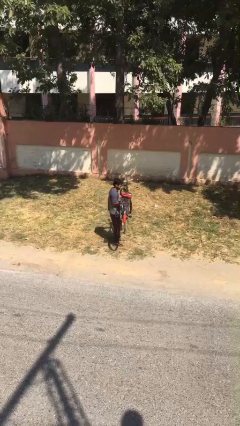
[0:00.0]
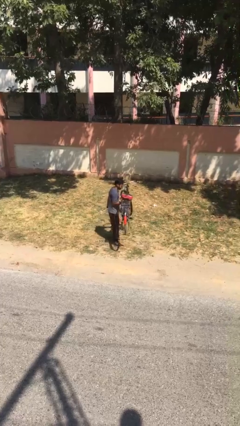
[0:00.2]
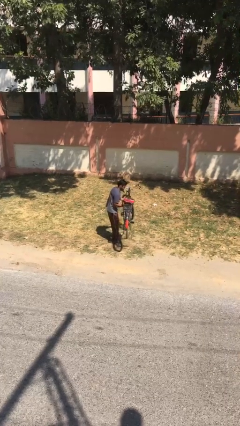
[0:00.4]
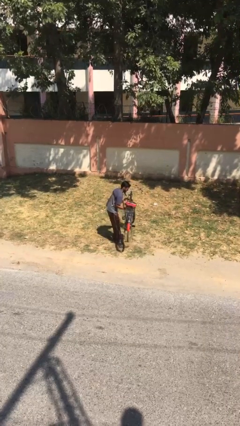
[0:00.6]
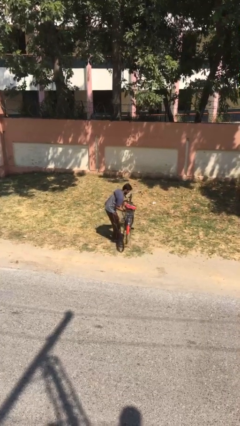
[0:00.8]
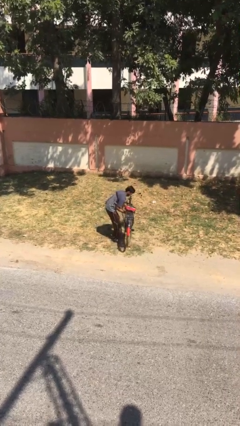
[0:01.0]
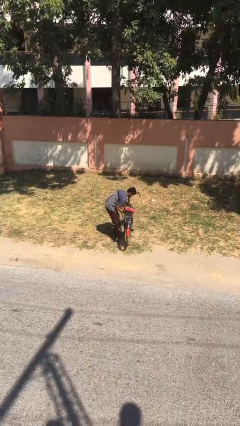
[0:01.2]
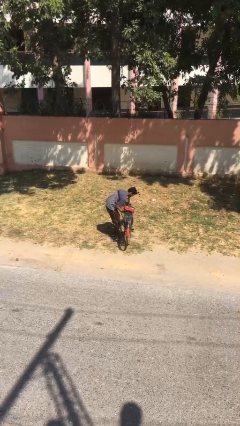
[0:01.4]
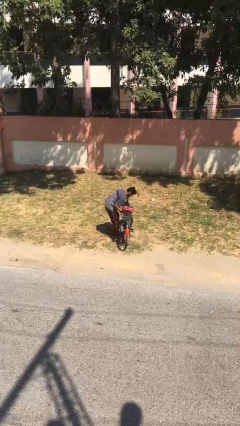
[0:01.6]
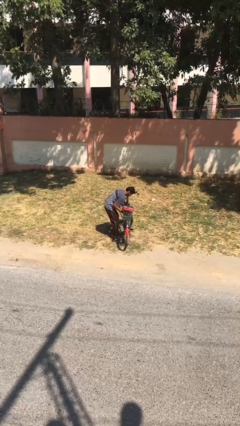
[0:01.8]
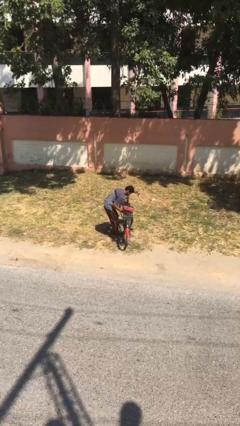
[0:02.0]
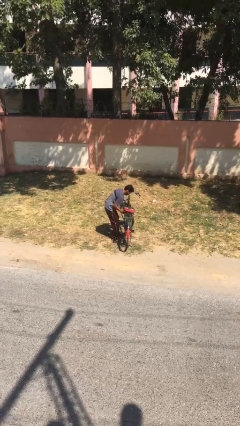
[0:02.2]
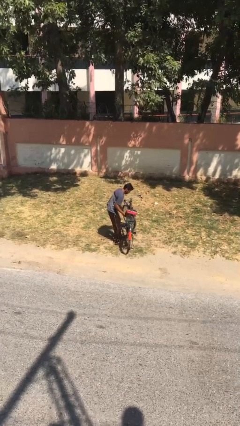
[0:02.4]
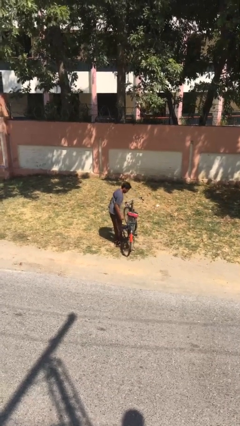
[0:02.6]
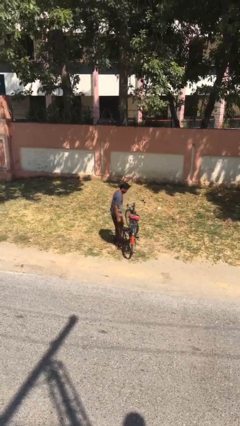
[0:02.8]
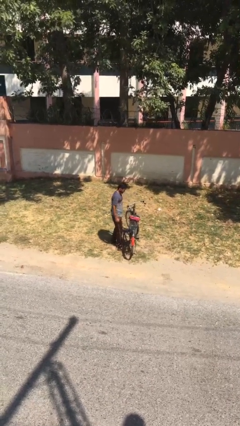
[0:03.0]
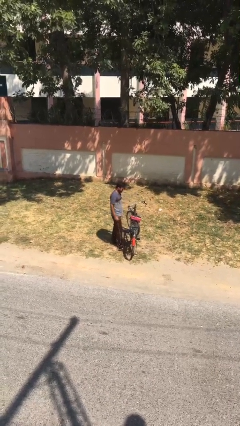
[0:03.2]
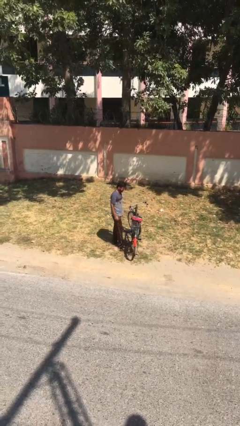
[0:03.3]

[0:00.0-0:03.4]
person puts down object on floor

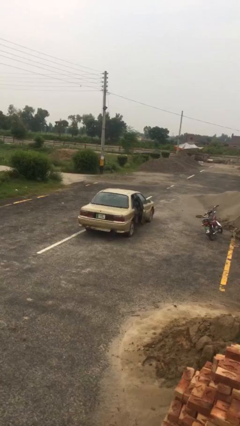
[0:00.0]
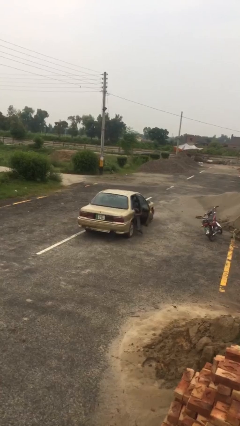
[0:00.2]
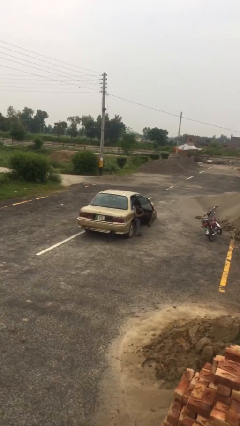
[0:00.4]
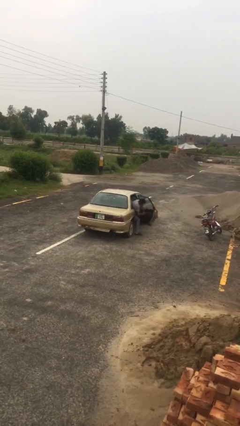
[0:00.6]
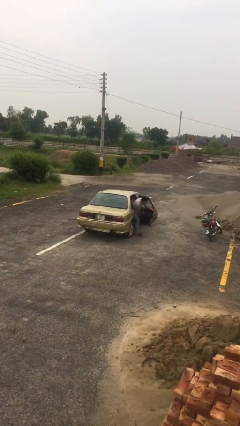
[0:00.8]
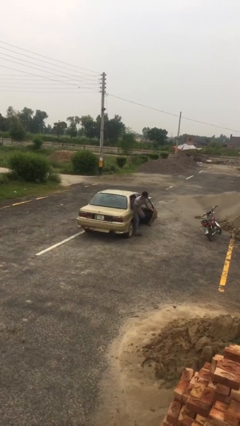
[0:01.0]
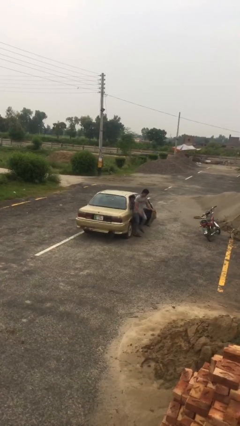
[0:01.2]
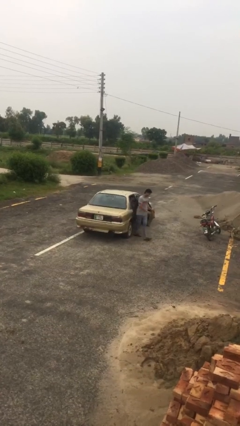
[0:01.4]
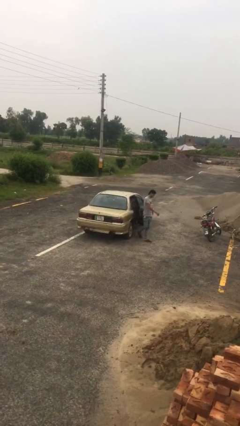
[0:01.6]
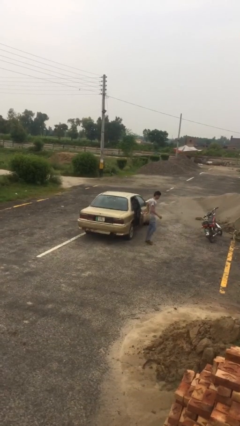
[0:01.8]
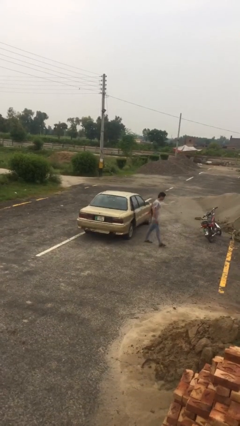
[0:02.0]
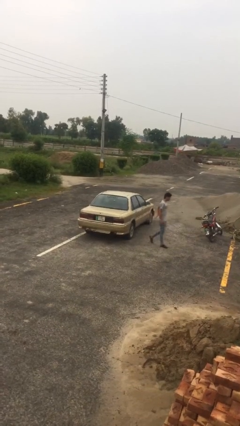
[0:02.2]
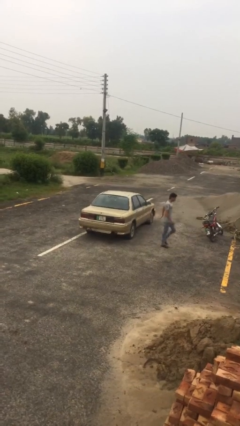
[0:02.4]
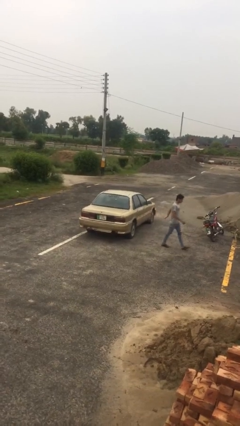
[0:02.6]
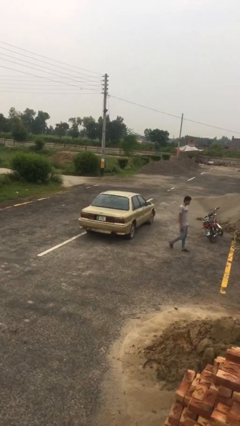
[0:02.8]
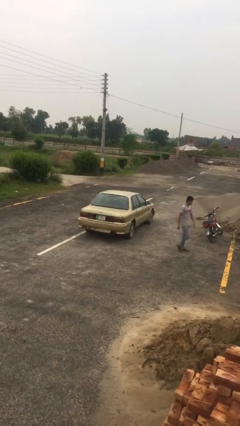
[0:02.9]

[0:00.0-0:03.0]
car drops off person

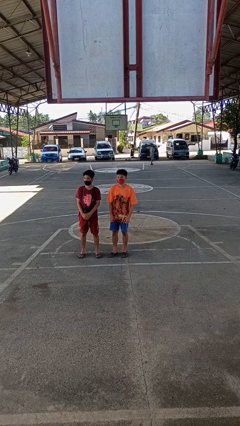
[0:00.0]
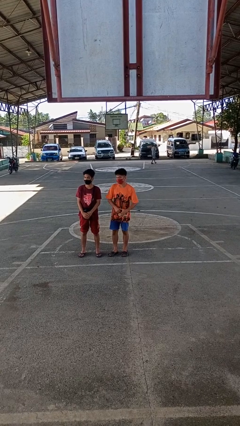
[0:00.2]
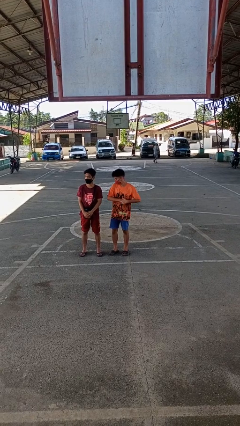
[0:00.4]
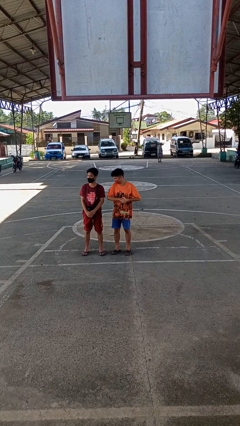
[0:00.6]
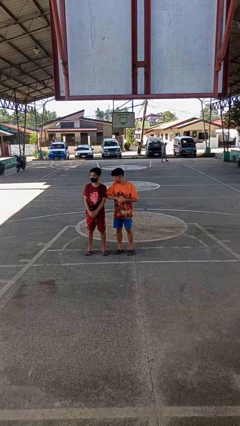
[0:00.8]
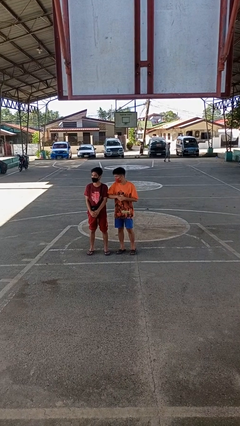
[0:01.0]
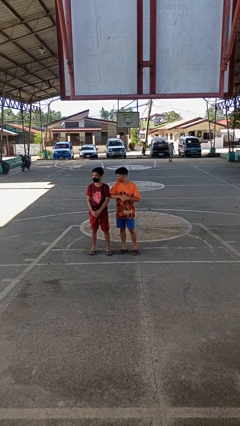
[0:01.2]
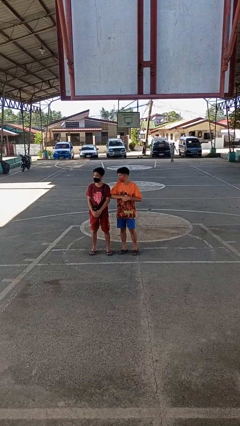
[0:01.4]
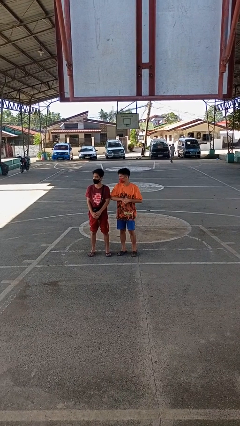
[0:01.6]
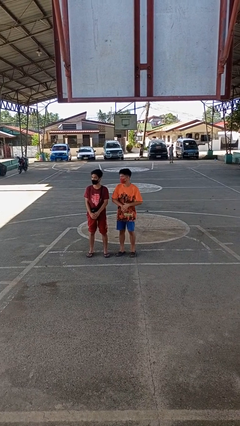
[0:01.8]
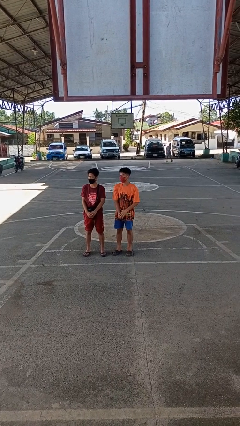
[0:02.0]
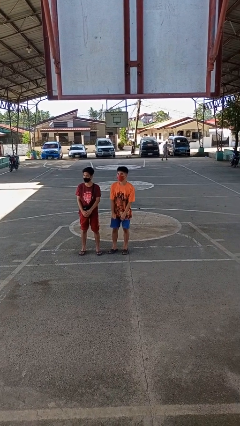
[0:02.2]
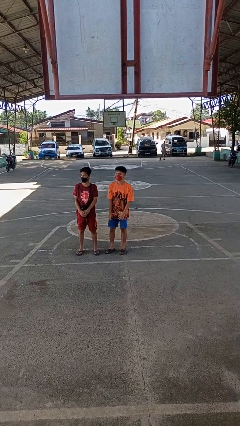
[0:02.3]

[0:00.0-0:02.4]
person nudges person with elbow

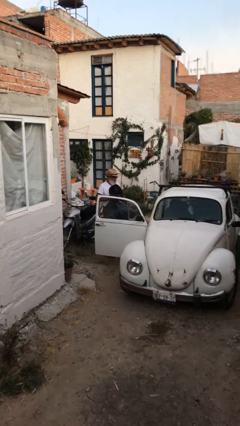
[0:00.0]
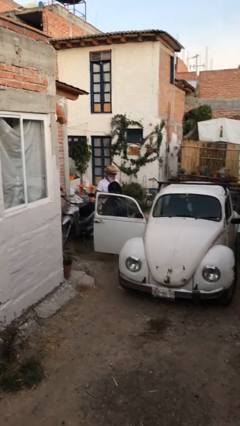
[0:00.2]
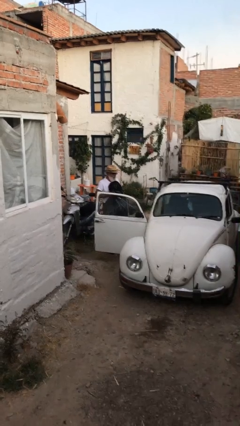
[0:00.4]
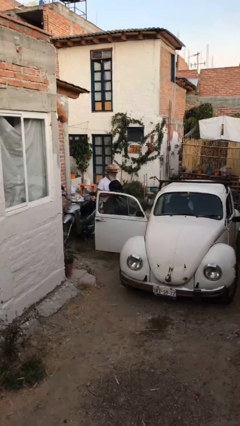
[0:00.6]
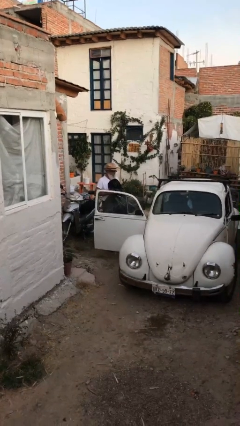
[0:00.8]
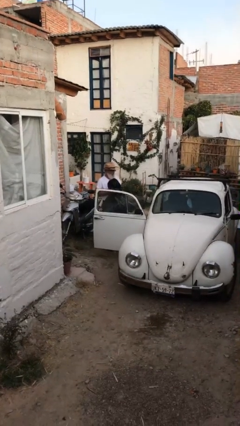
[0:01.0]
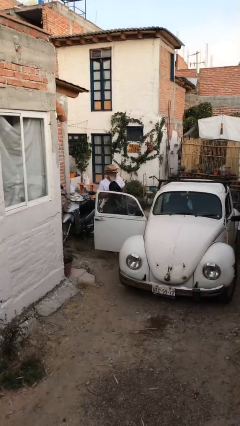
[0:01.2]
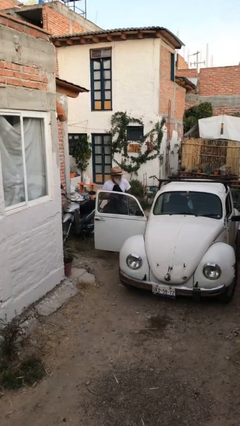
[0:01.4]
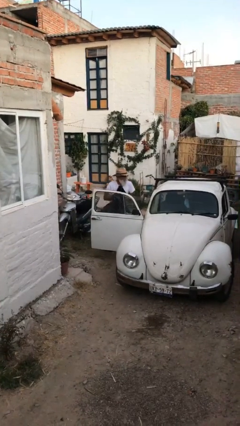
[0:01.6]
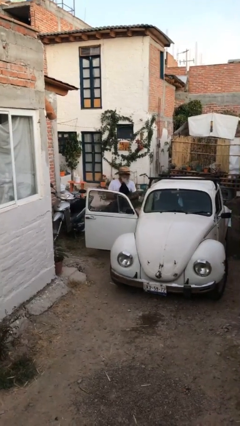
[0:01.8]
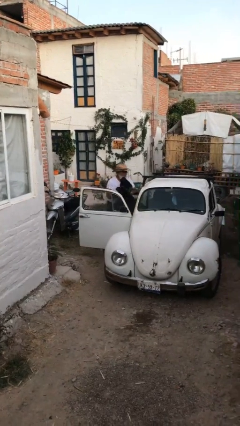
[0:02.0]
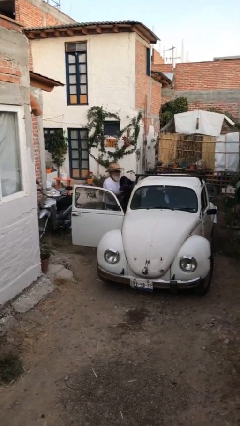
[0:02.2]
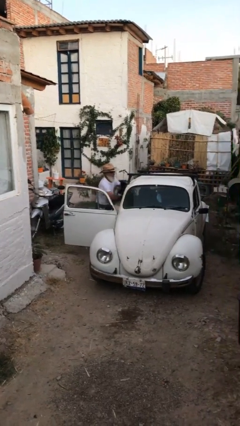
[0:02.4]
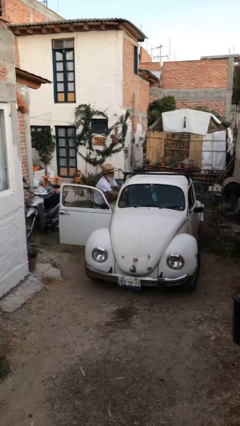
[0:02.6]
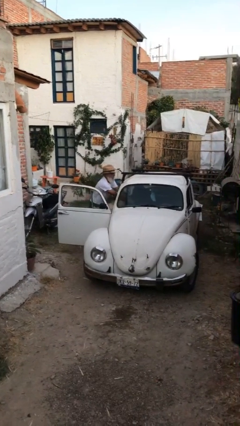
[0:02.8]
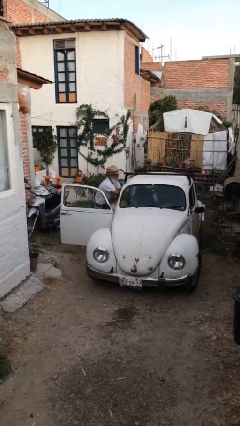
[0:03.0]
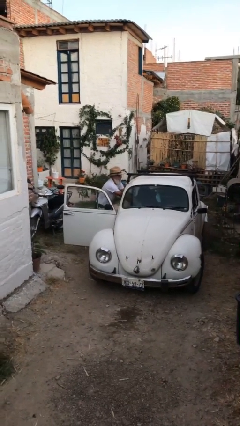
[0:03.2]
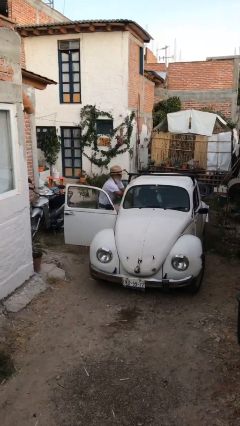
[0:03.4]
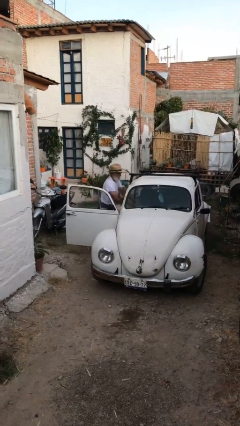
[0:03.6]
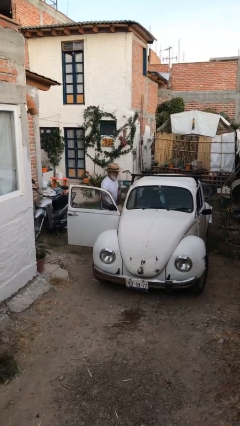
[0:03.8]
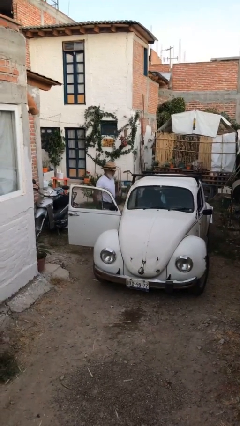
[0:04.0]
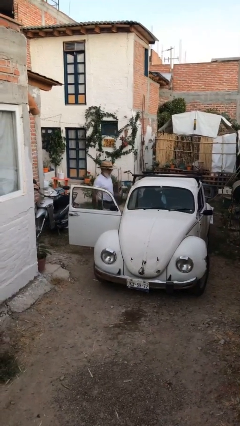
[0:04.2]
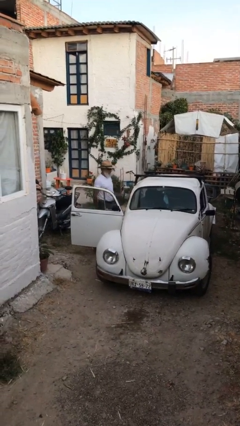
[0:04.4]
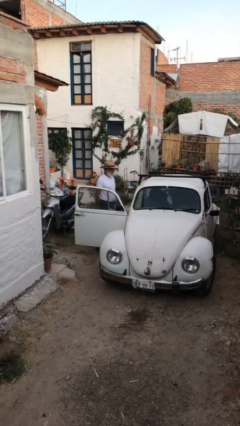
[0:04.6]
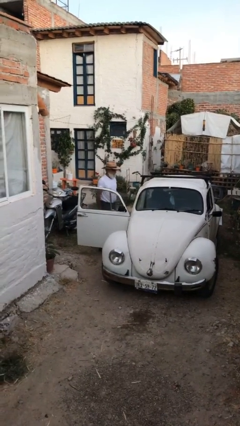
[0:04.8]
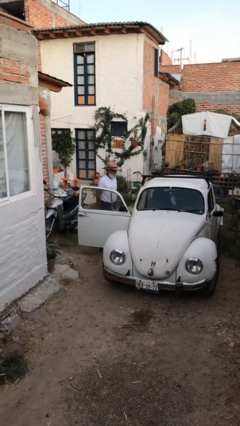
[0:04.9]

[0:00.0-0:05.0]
person loads car

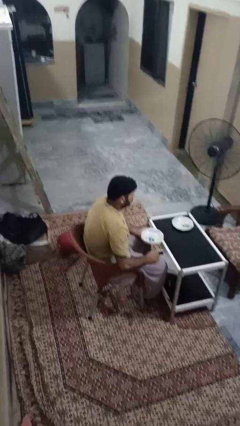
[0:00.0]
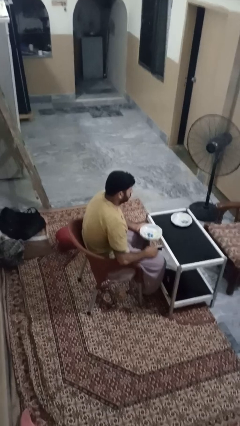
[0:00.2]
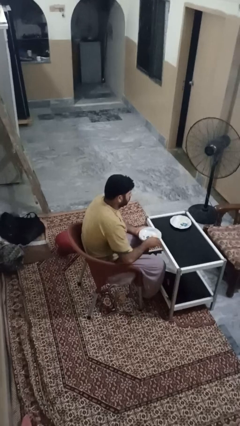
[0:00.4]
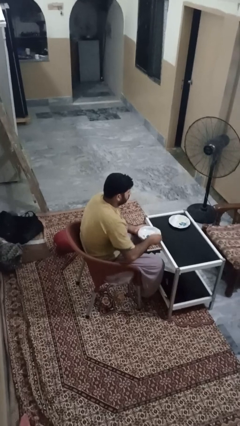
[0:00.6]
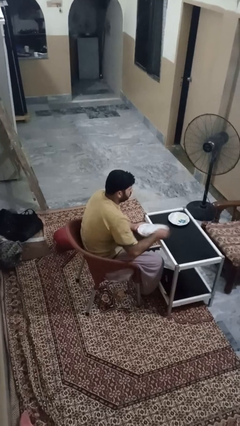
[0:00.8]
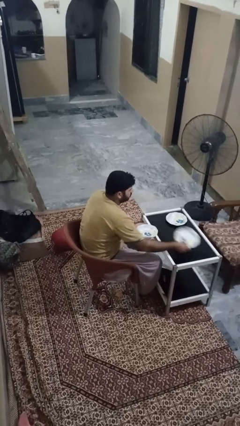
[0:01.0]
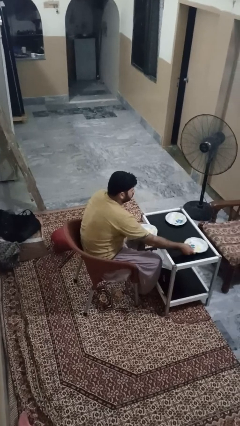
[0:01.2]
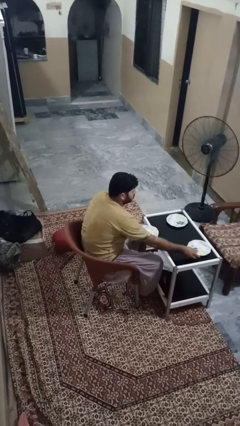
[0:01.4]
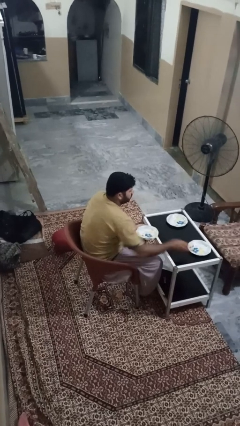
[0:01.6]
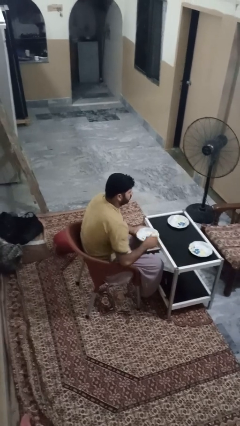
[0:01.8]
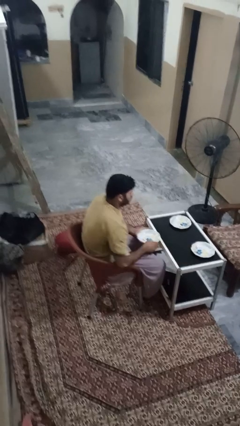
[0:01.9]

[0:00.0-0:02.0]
person sets table

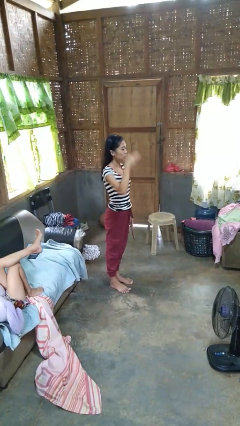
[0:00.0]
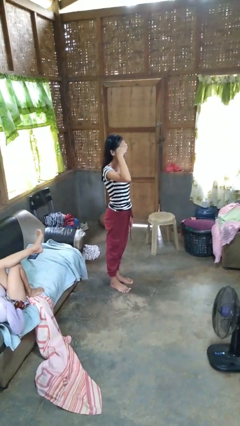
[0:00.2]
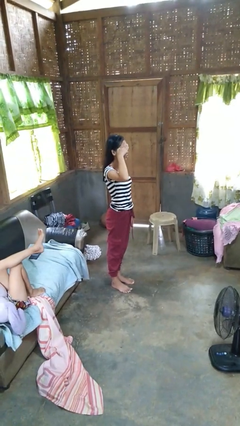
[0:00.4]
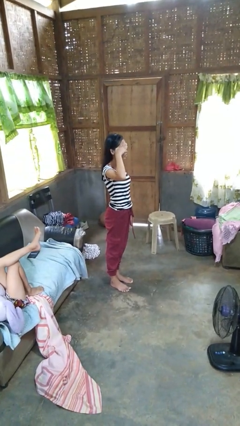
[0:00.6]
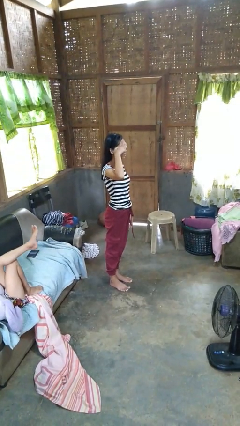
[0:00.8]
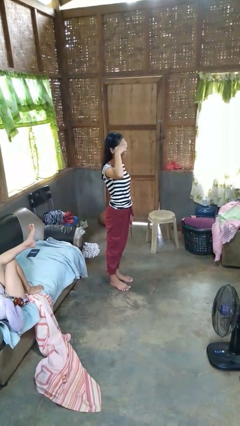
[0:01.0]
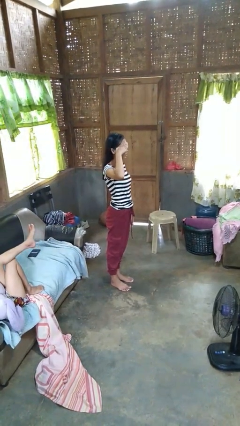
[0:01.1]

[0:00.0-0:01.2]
person salutes

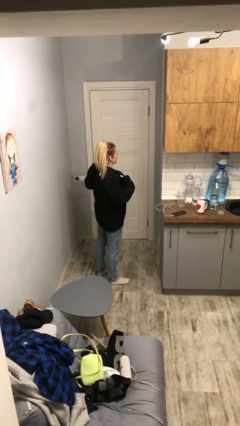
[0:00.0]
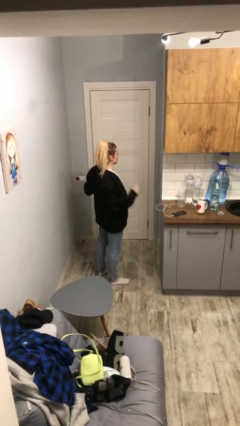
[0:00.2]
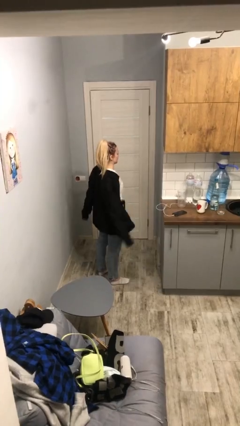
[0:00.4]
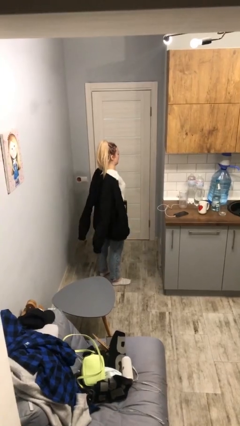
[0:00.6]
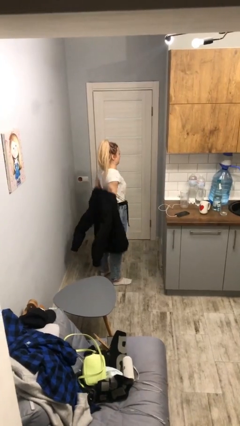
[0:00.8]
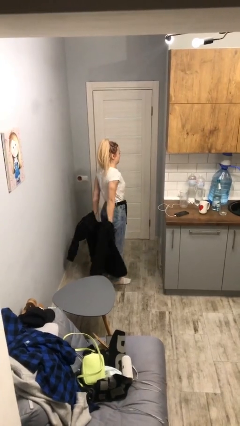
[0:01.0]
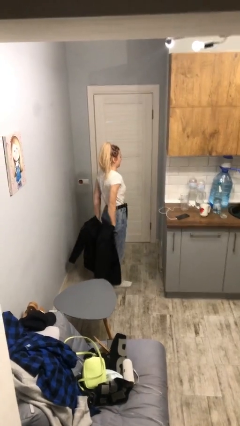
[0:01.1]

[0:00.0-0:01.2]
person takes off jacket
